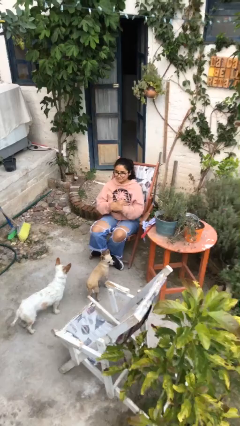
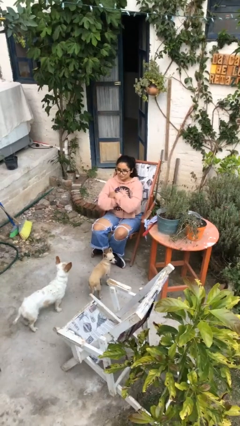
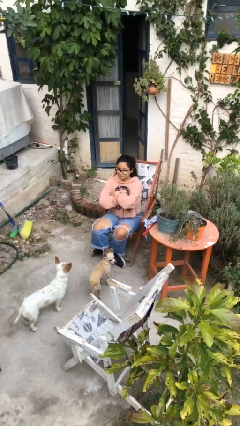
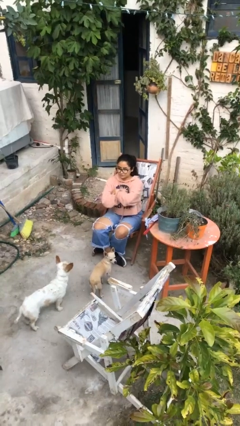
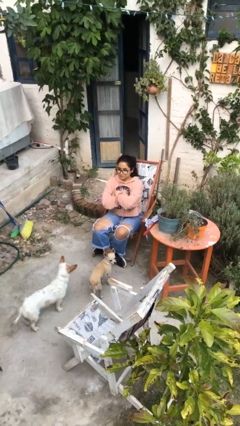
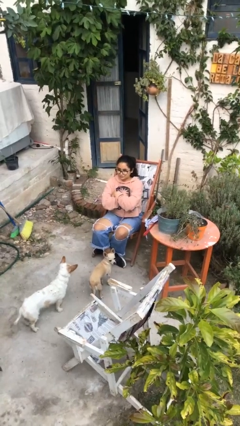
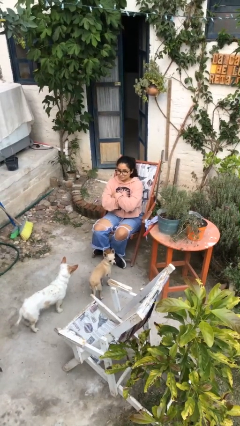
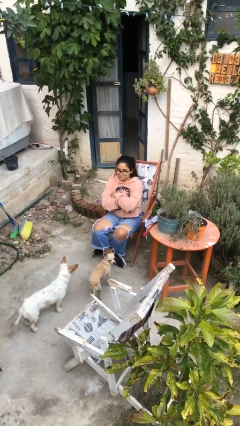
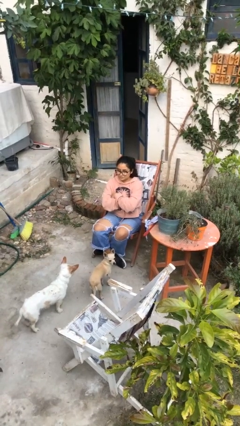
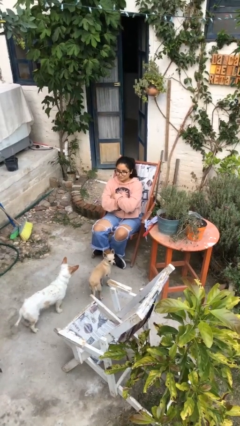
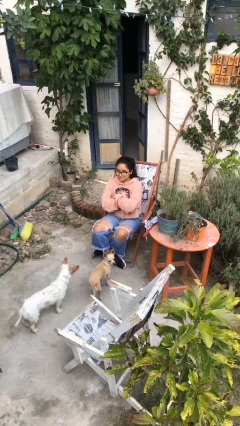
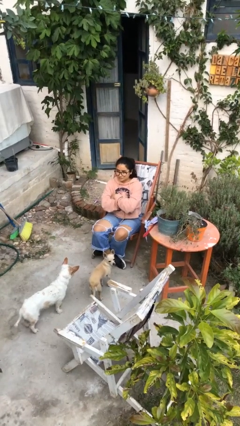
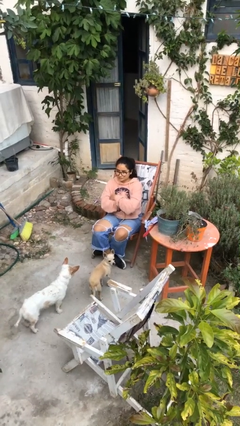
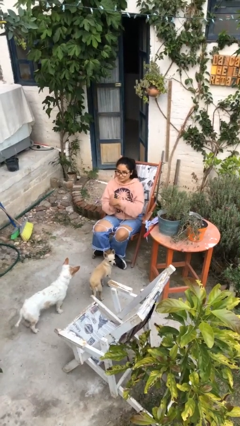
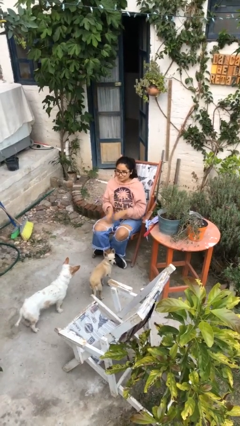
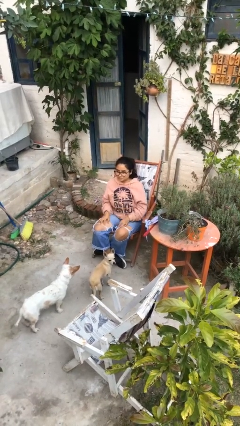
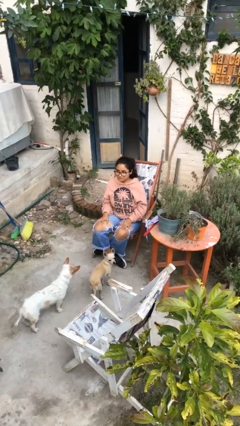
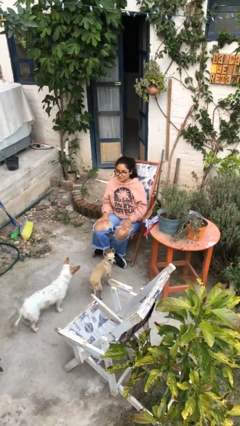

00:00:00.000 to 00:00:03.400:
person crosses arms

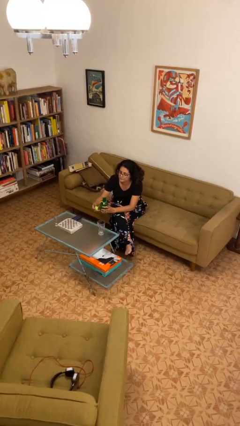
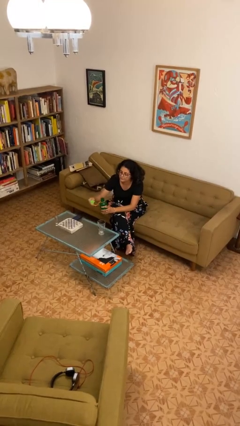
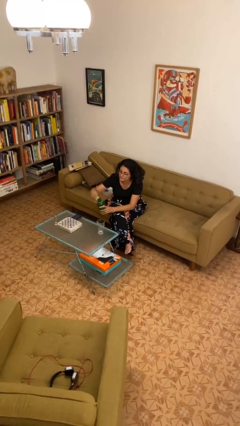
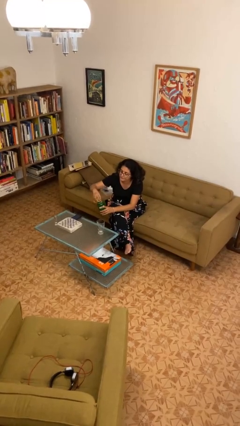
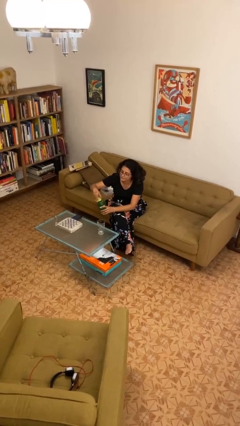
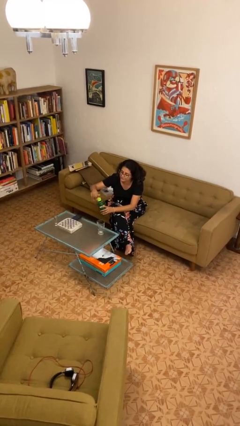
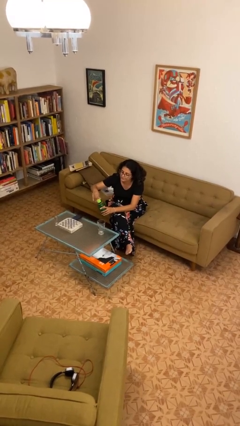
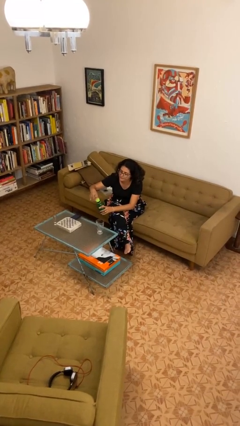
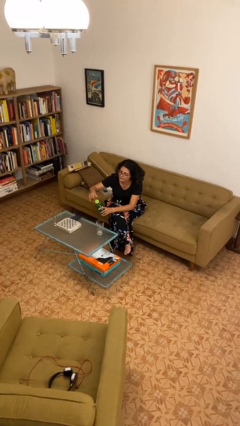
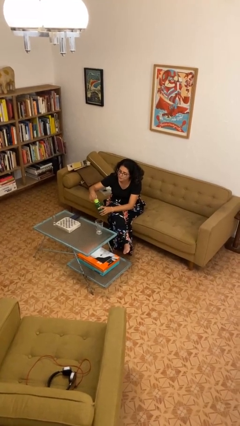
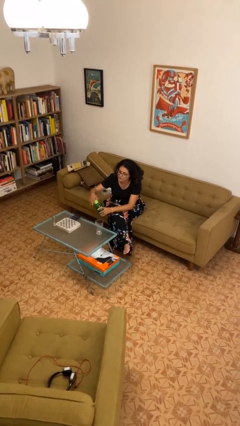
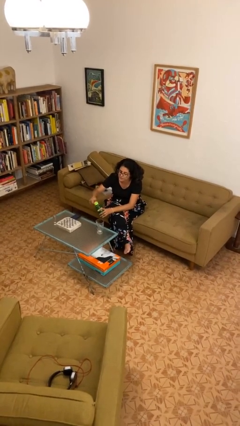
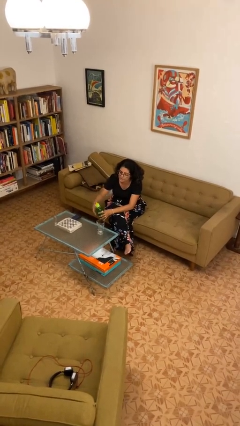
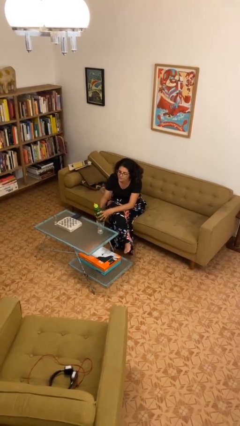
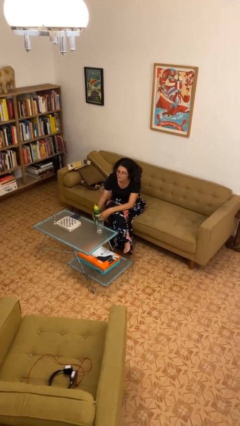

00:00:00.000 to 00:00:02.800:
person screws lid to bottle

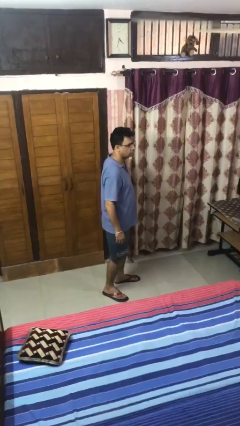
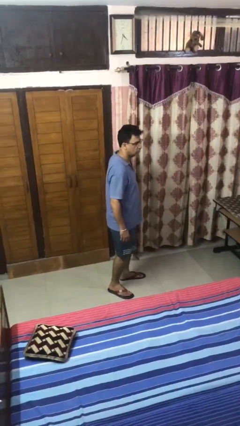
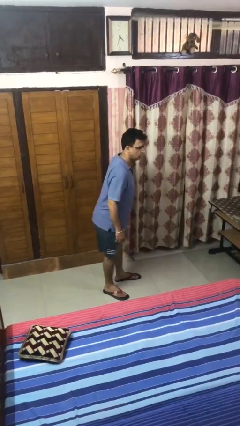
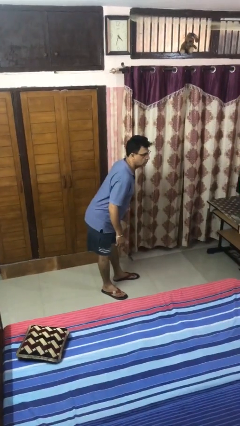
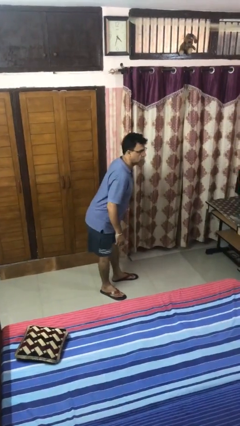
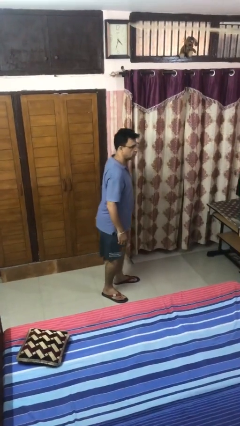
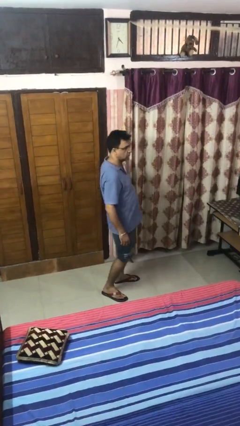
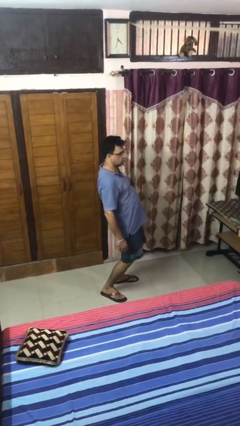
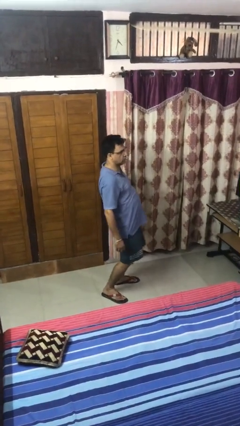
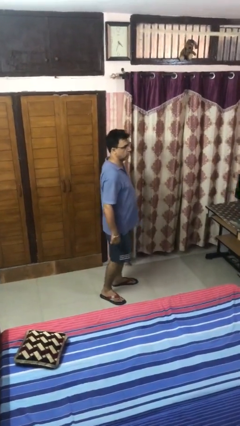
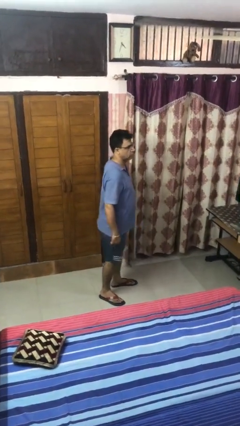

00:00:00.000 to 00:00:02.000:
person wiggles hips

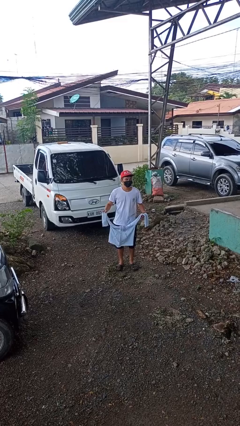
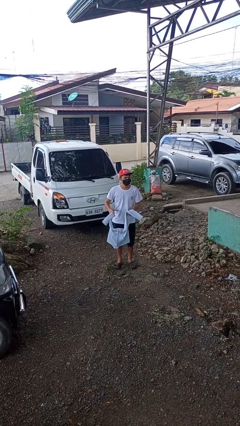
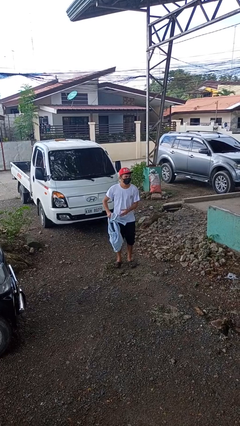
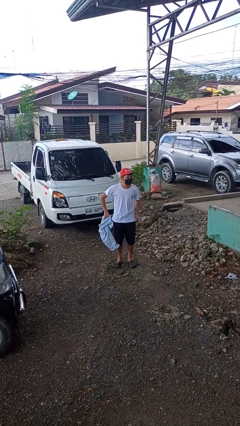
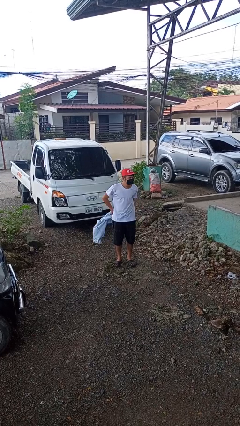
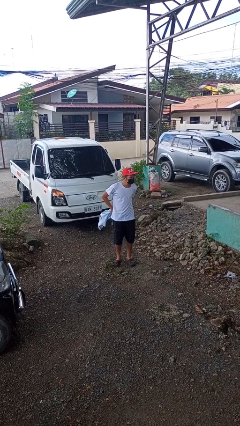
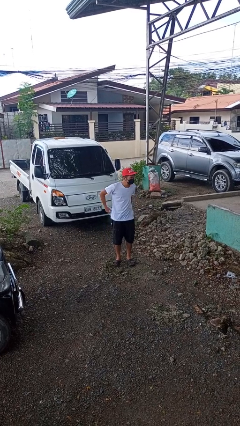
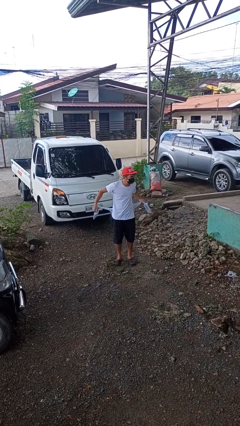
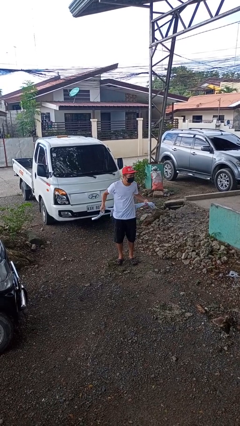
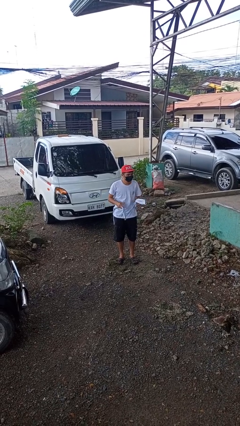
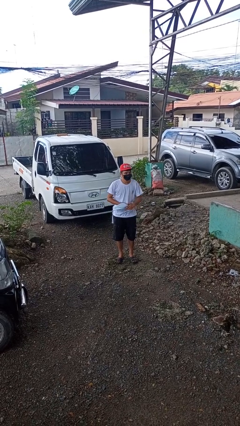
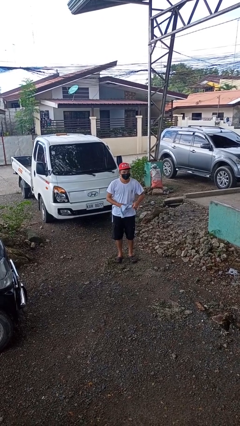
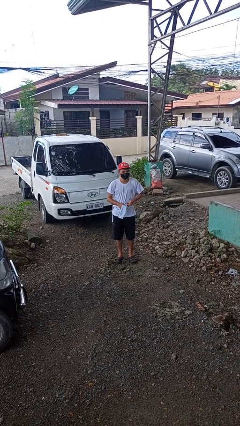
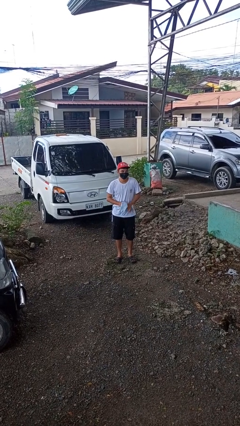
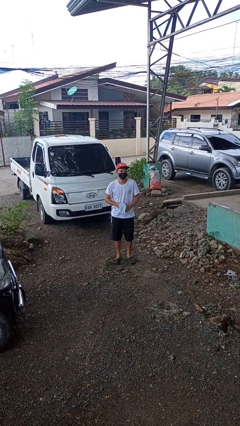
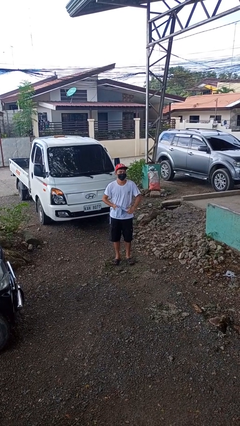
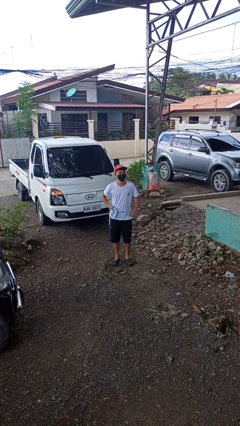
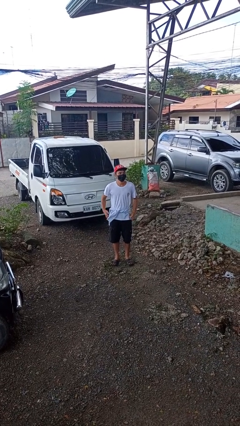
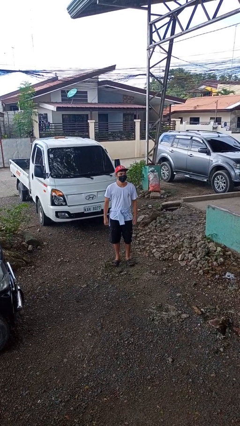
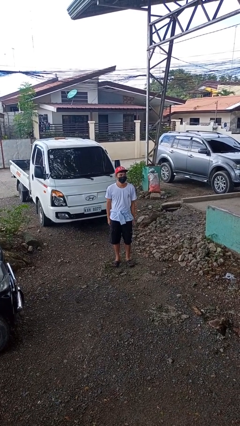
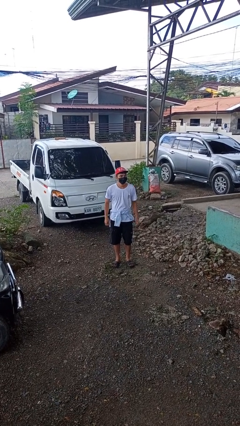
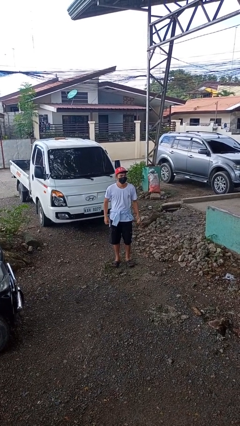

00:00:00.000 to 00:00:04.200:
person ties jacket around waist

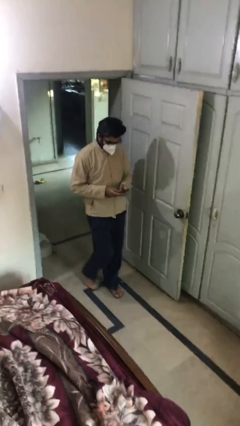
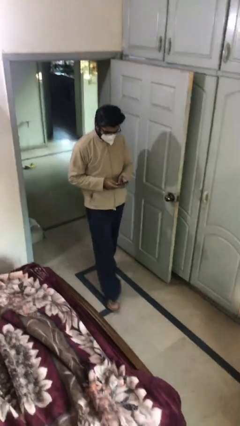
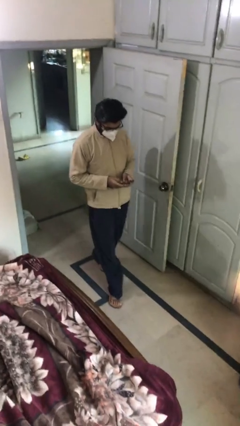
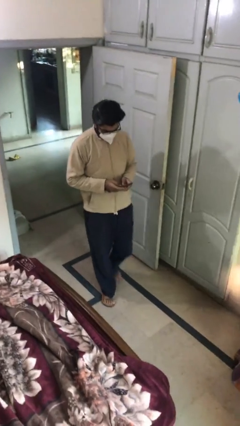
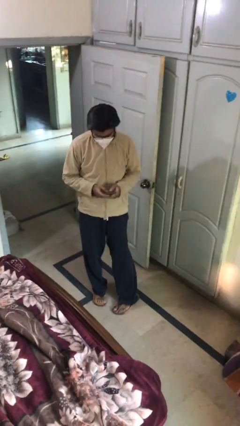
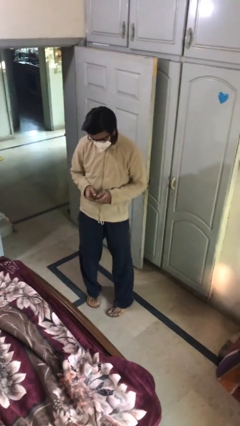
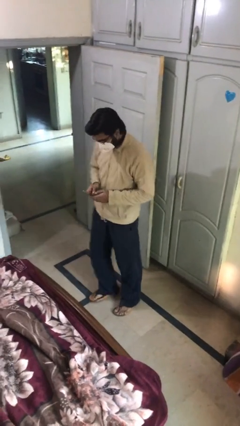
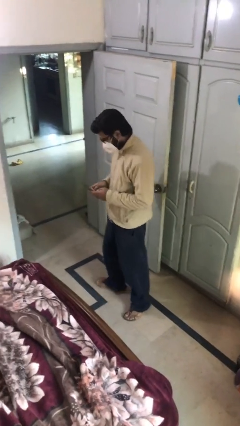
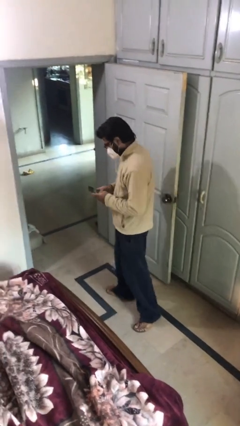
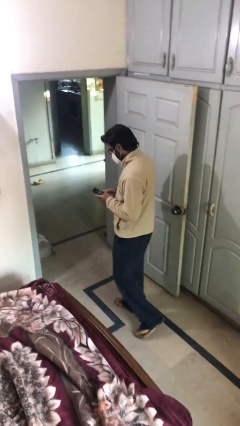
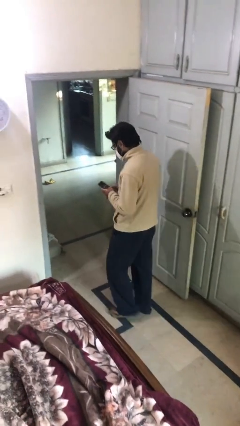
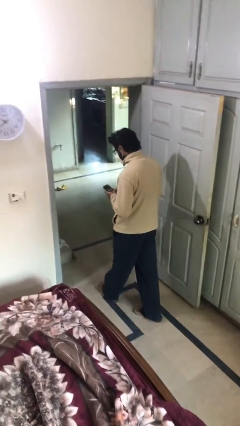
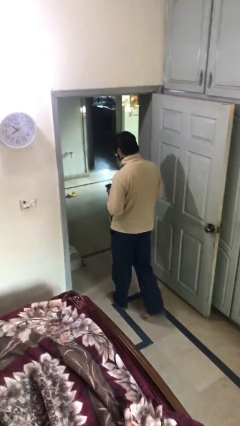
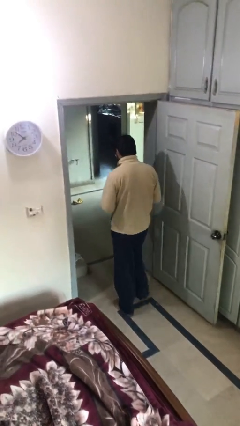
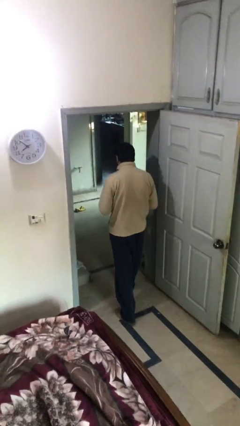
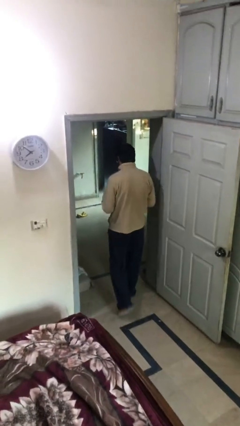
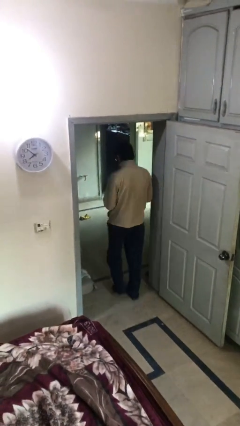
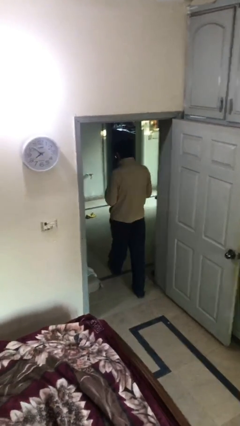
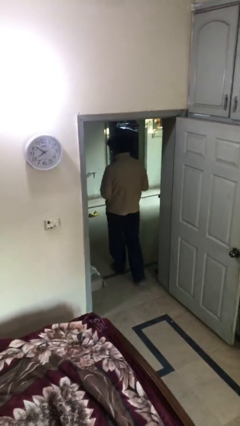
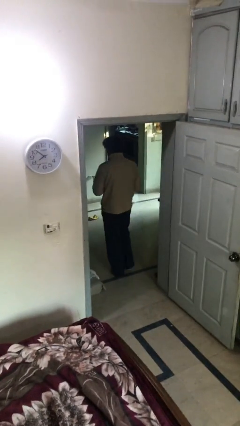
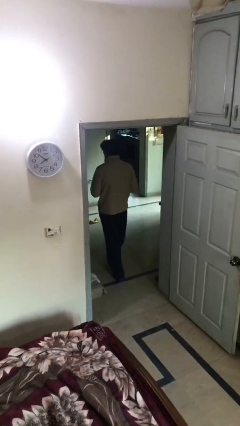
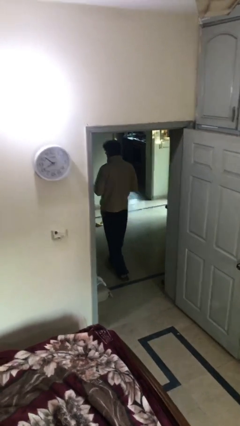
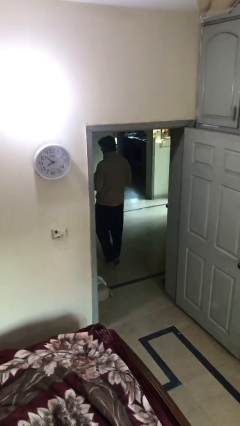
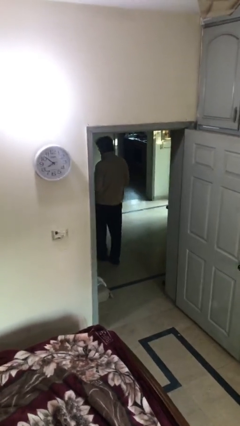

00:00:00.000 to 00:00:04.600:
person exits scene through structure

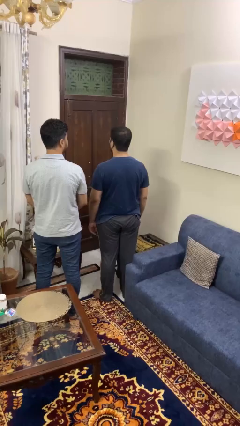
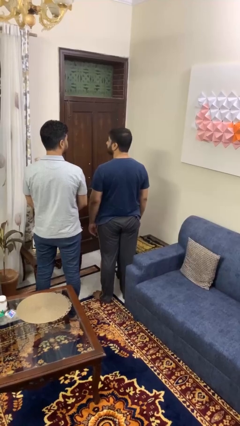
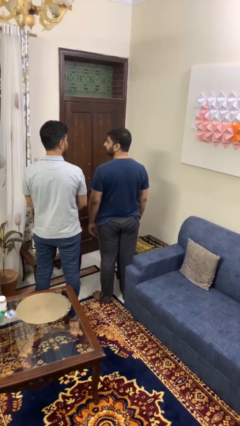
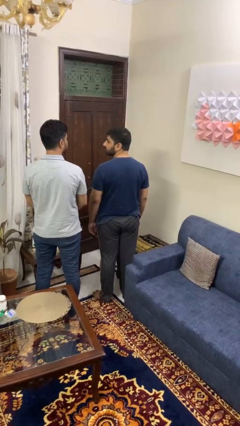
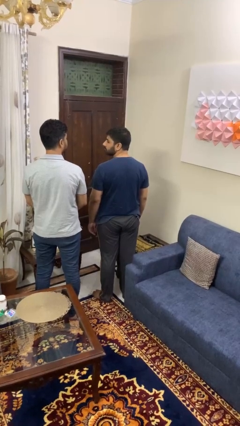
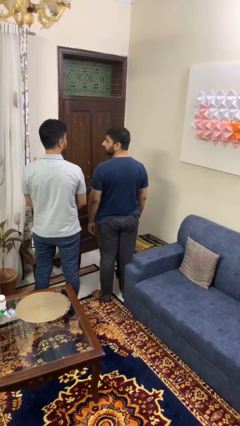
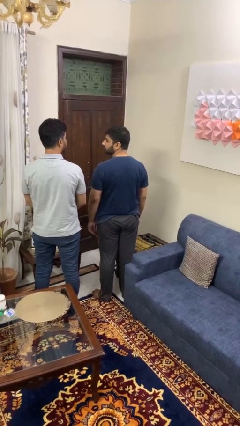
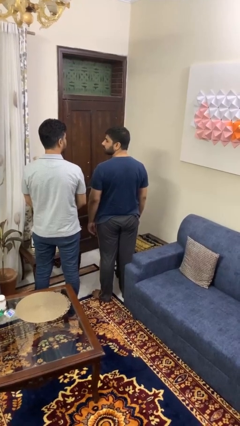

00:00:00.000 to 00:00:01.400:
person looks over shoulder
